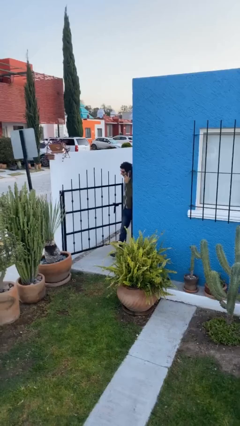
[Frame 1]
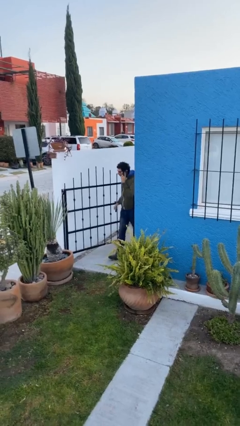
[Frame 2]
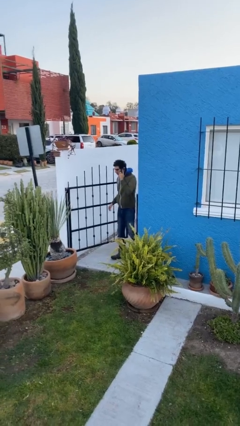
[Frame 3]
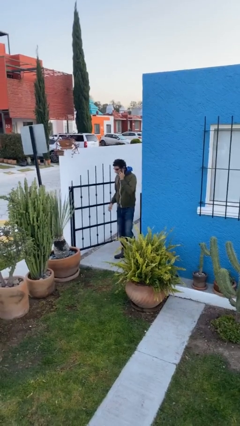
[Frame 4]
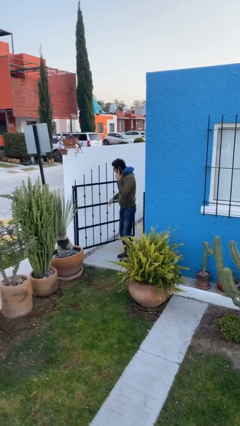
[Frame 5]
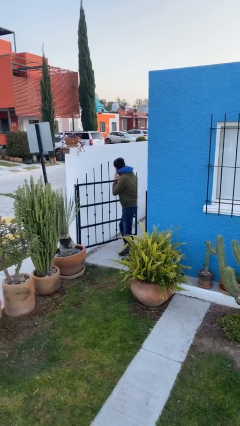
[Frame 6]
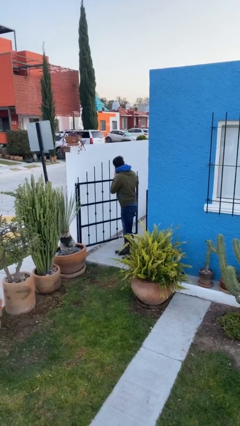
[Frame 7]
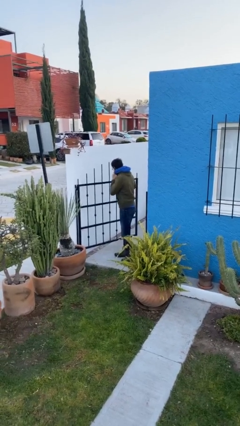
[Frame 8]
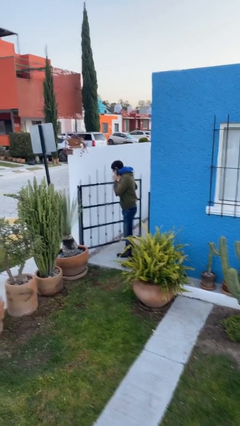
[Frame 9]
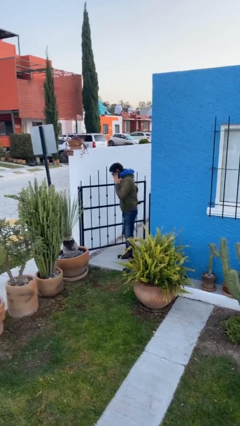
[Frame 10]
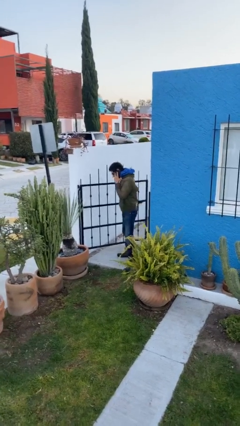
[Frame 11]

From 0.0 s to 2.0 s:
person enters scene through structure

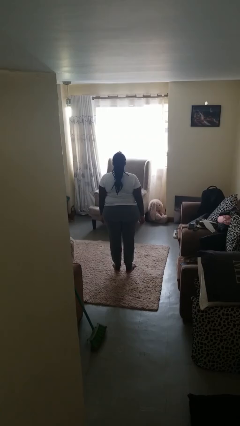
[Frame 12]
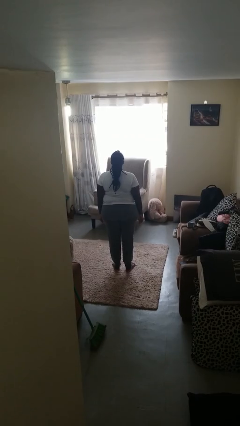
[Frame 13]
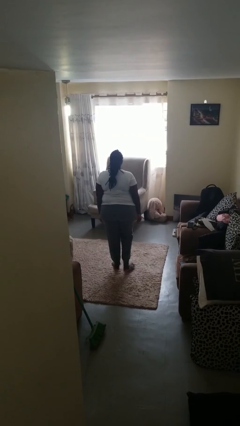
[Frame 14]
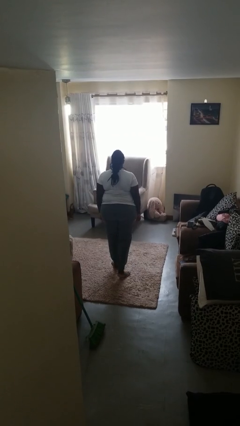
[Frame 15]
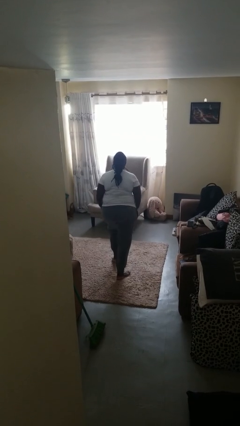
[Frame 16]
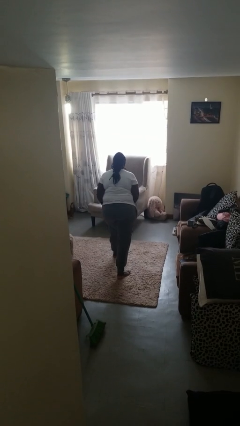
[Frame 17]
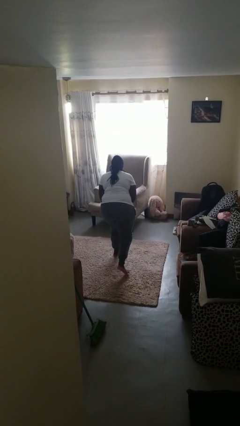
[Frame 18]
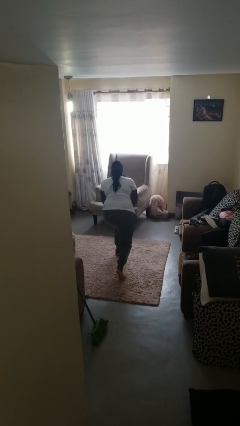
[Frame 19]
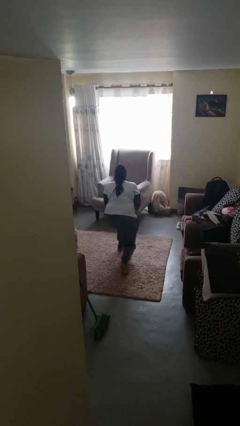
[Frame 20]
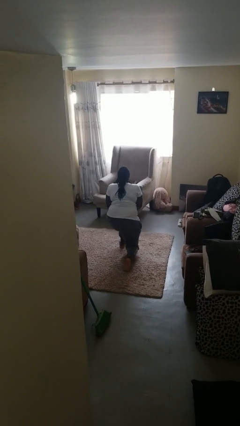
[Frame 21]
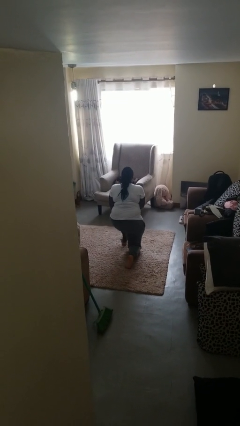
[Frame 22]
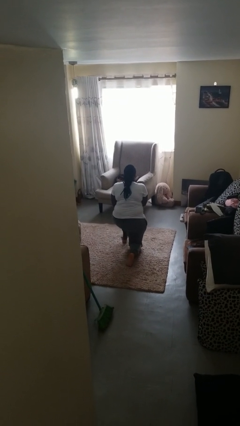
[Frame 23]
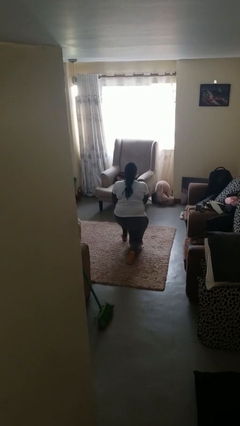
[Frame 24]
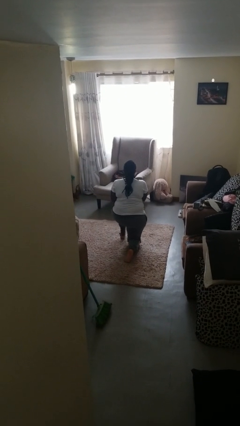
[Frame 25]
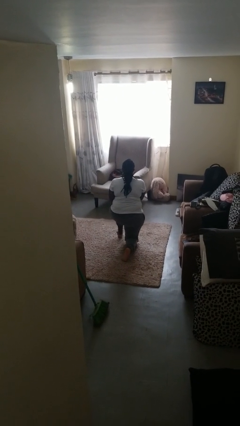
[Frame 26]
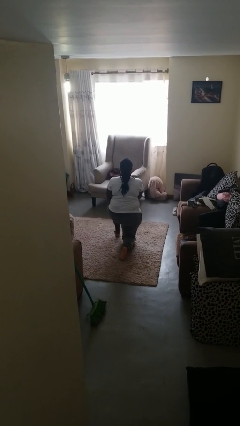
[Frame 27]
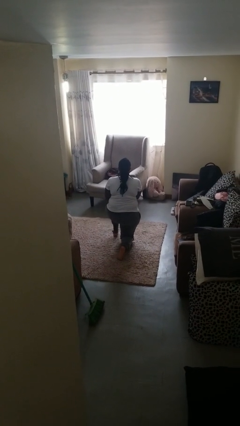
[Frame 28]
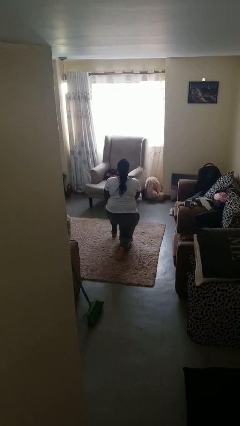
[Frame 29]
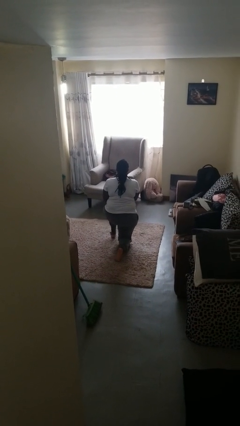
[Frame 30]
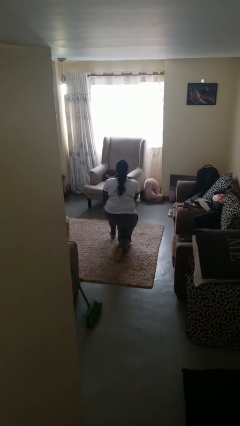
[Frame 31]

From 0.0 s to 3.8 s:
person kneels

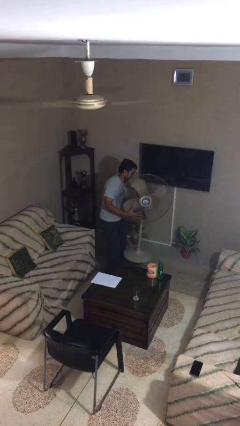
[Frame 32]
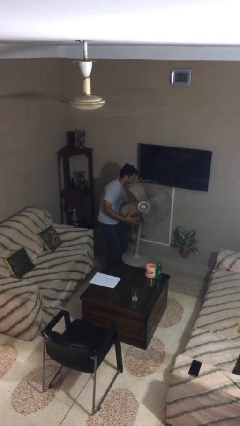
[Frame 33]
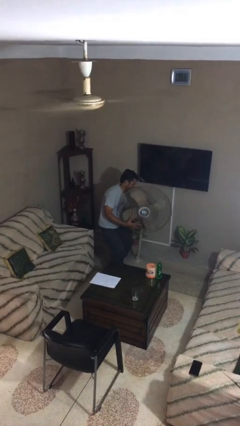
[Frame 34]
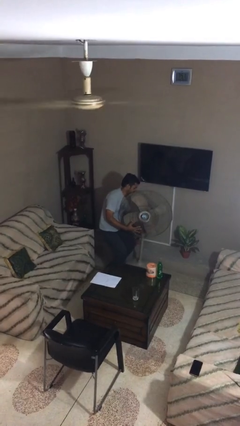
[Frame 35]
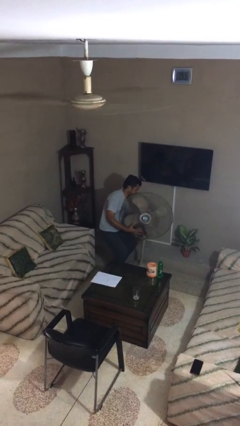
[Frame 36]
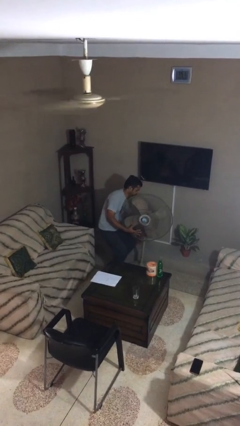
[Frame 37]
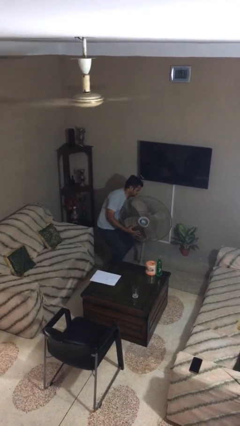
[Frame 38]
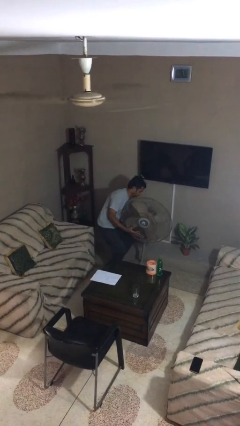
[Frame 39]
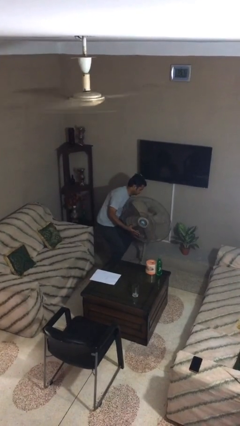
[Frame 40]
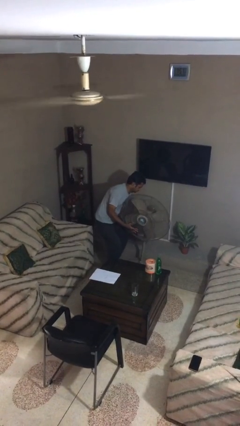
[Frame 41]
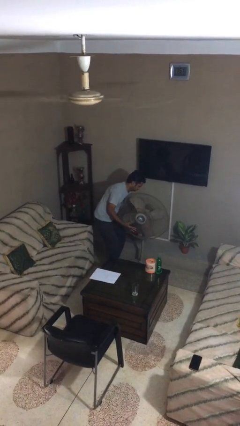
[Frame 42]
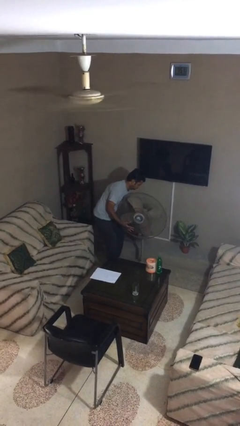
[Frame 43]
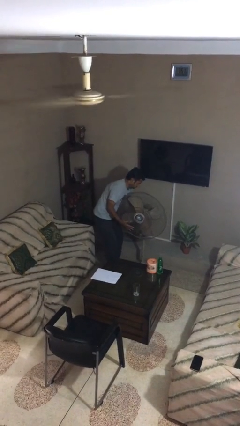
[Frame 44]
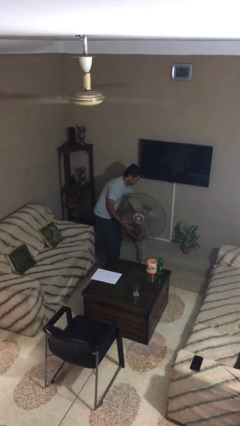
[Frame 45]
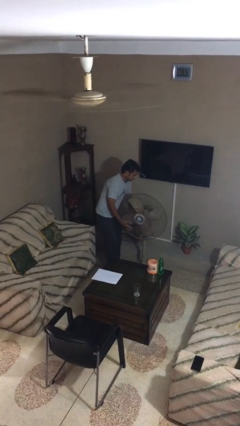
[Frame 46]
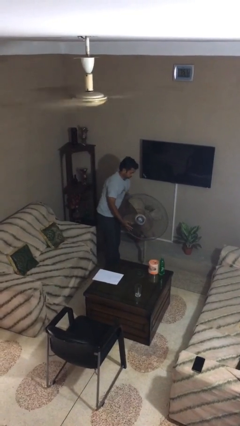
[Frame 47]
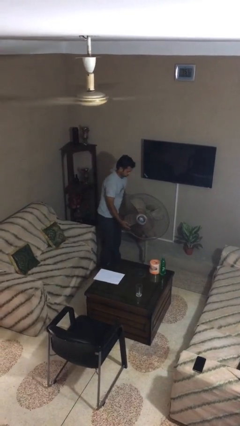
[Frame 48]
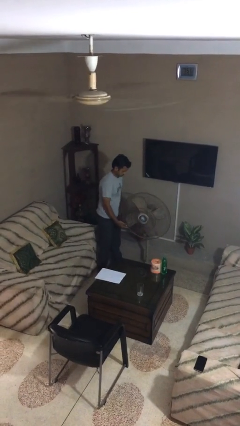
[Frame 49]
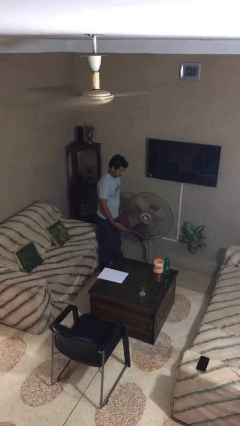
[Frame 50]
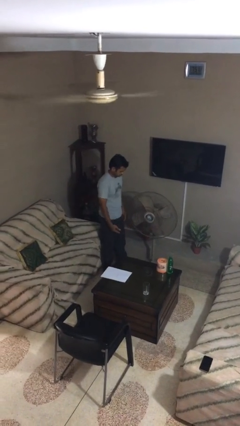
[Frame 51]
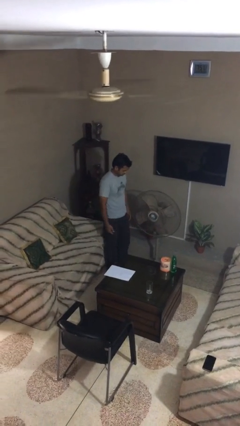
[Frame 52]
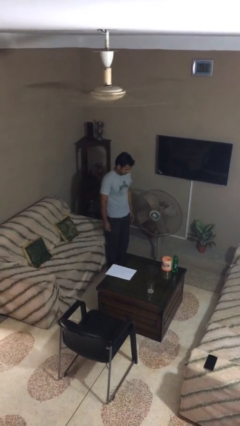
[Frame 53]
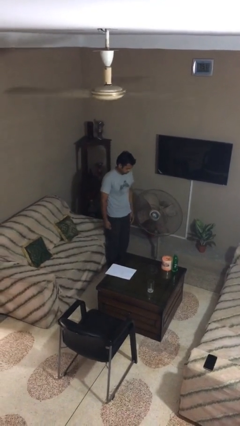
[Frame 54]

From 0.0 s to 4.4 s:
person puts down object on floor

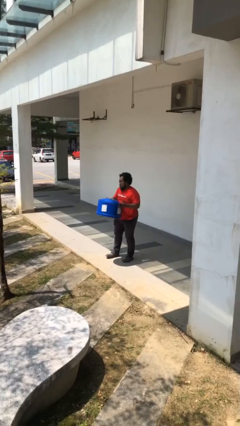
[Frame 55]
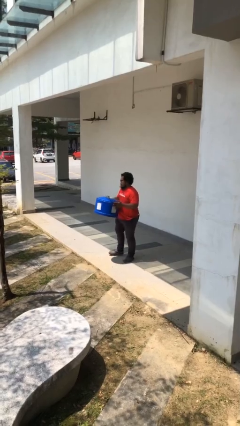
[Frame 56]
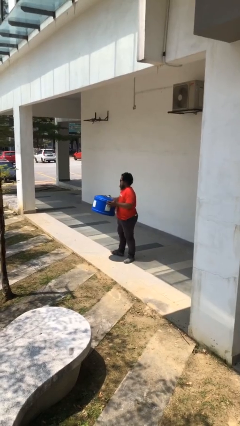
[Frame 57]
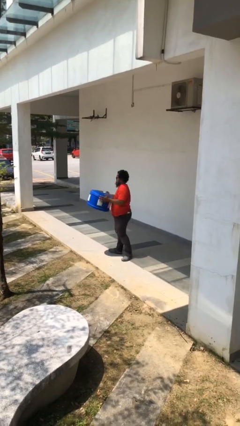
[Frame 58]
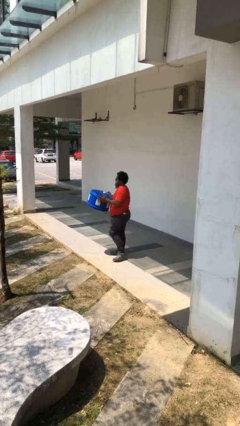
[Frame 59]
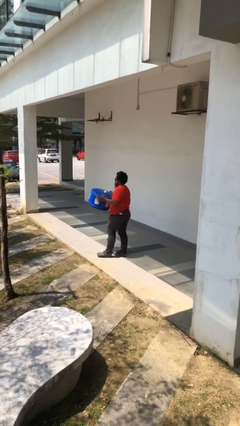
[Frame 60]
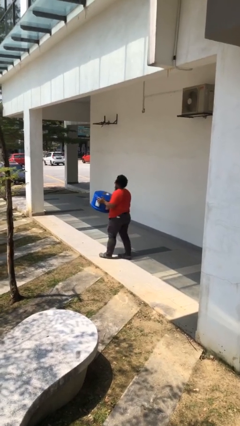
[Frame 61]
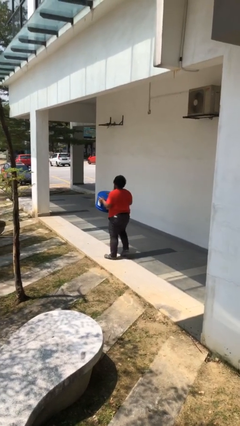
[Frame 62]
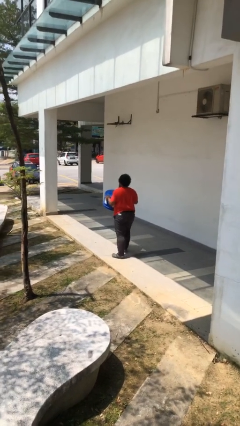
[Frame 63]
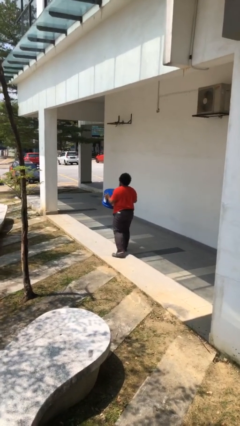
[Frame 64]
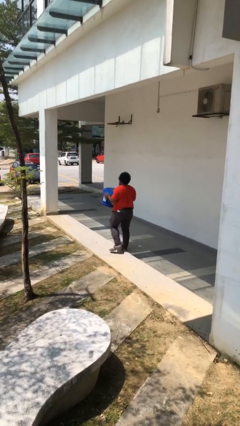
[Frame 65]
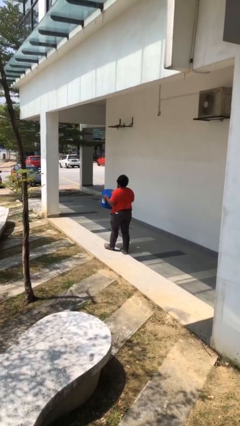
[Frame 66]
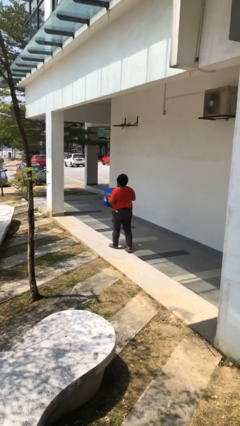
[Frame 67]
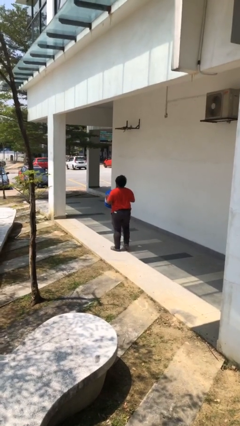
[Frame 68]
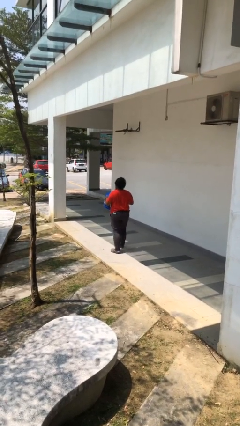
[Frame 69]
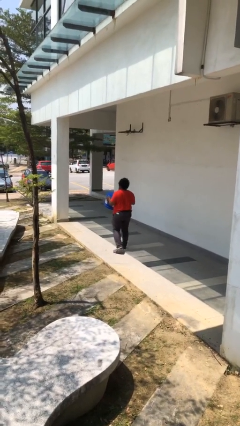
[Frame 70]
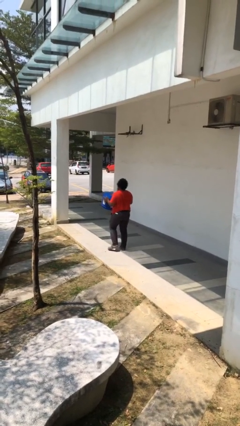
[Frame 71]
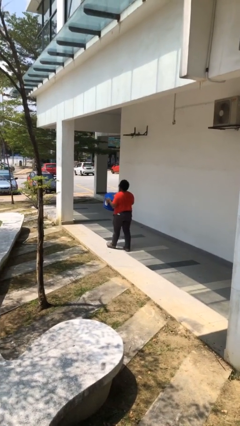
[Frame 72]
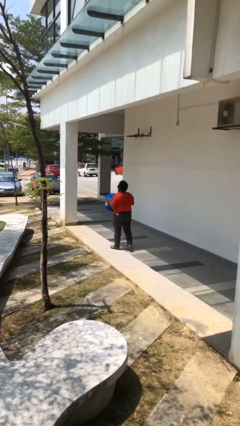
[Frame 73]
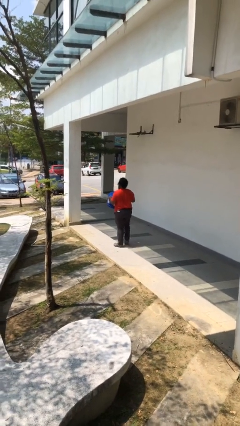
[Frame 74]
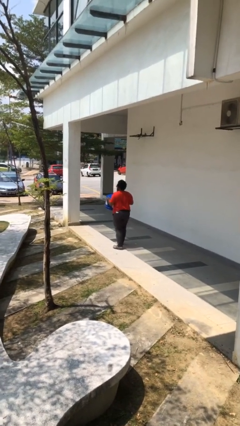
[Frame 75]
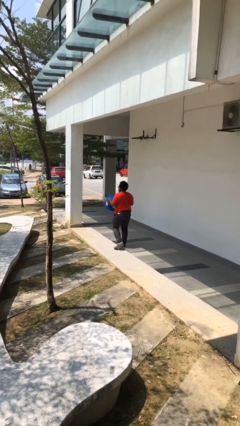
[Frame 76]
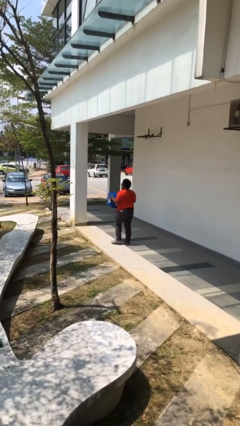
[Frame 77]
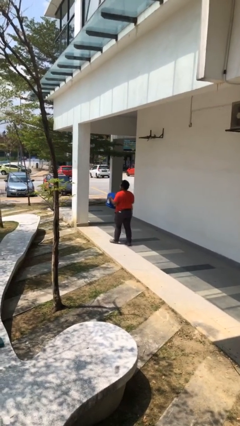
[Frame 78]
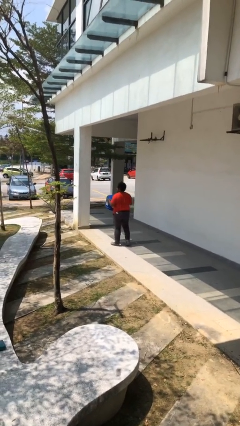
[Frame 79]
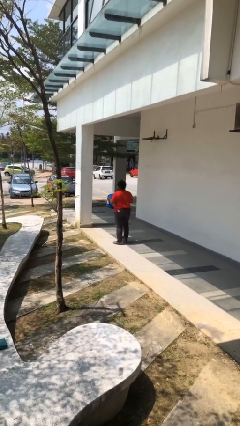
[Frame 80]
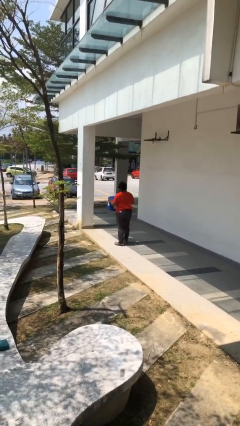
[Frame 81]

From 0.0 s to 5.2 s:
person carries heavy object

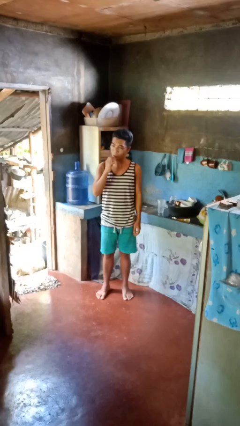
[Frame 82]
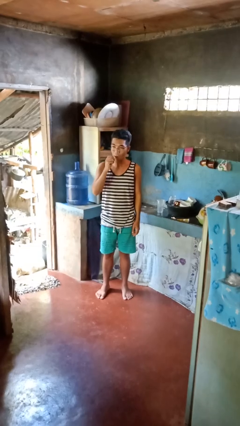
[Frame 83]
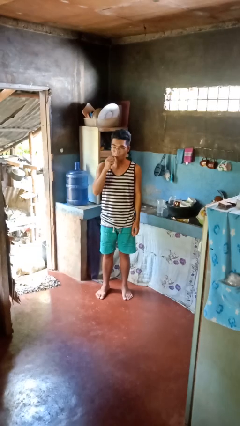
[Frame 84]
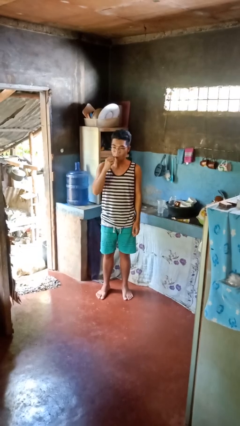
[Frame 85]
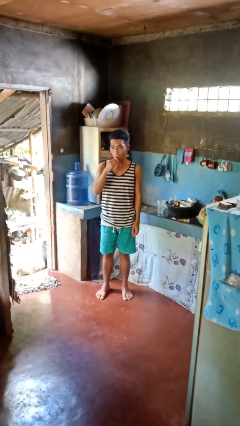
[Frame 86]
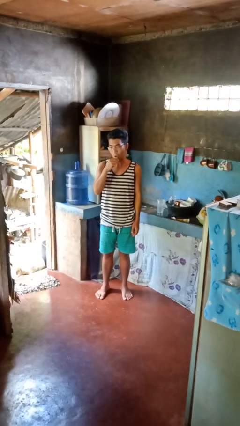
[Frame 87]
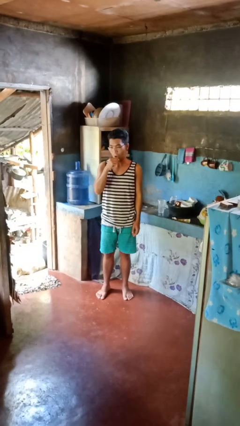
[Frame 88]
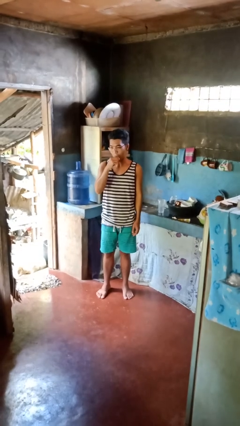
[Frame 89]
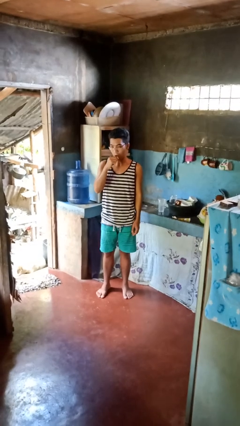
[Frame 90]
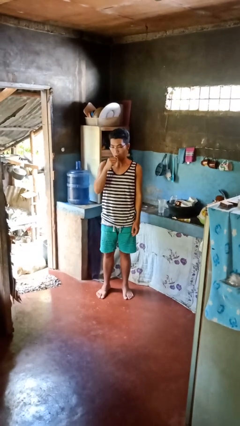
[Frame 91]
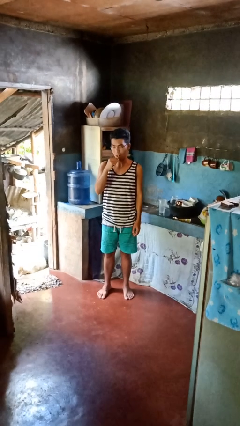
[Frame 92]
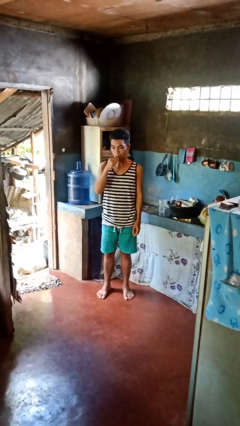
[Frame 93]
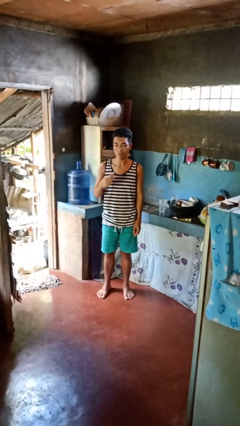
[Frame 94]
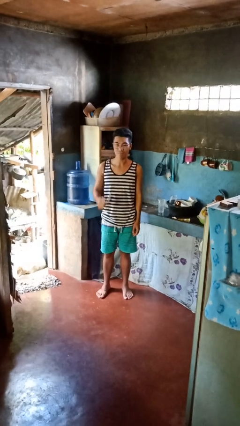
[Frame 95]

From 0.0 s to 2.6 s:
person brushes teeth
